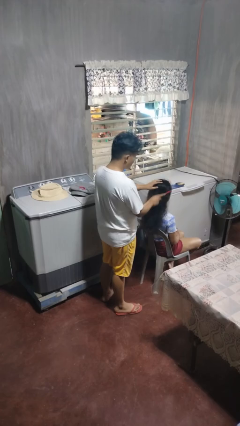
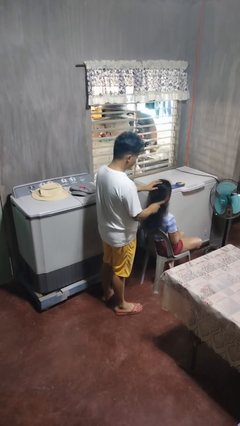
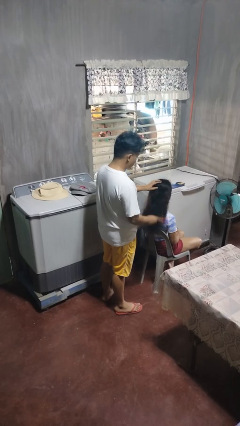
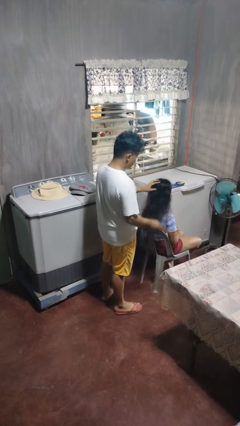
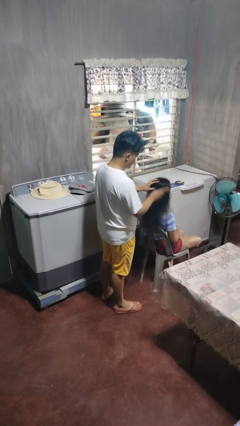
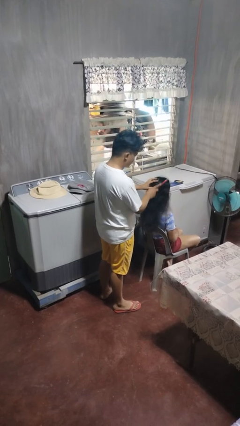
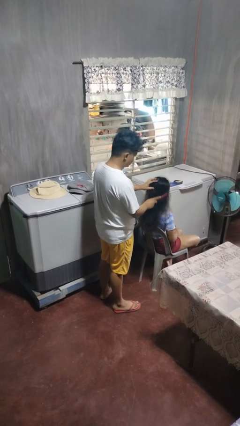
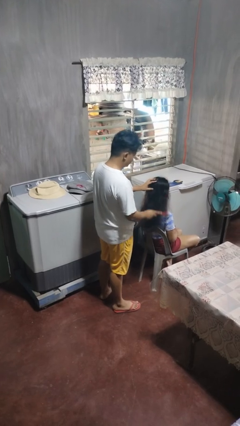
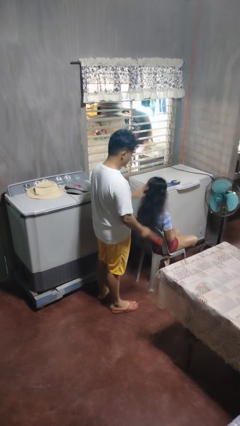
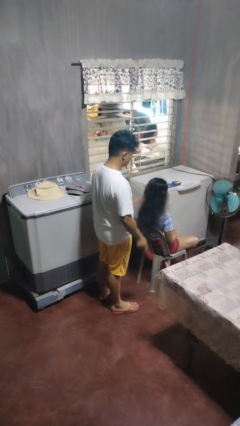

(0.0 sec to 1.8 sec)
person brushes hair of person

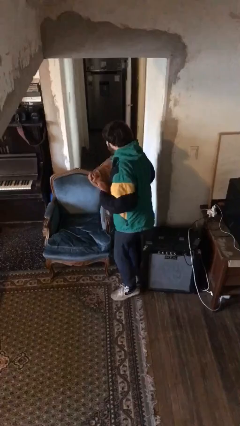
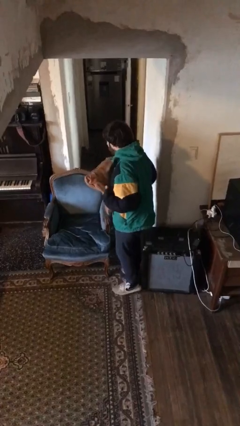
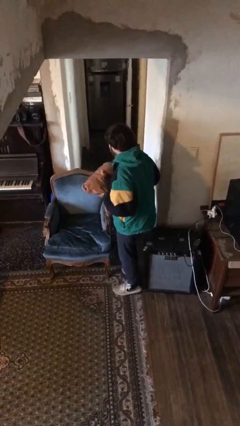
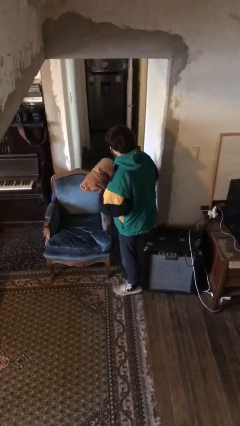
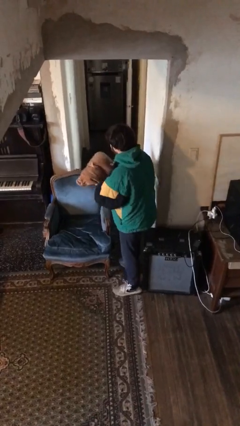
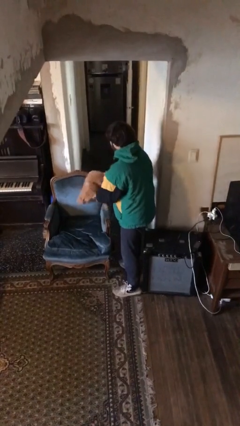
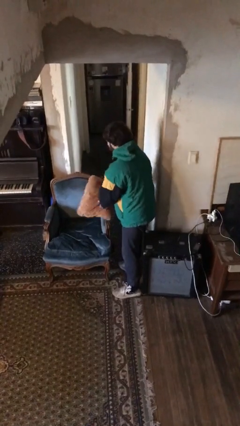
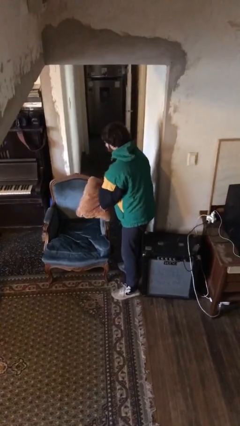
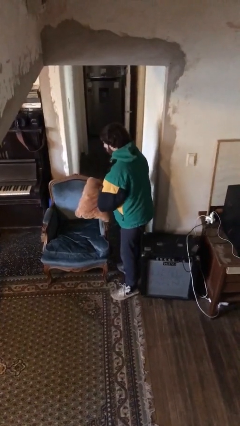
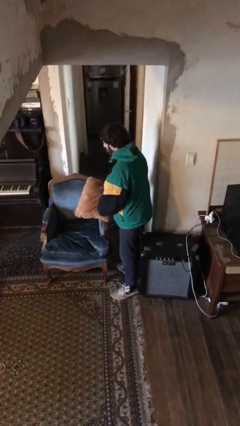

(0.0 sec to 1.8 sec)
person puts down object on couch

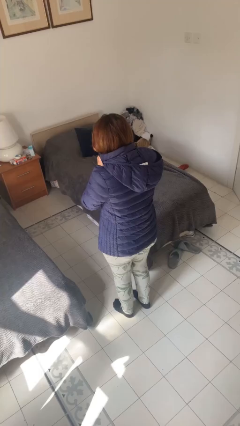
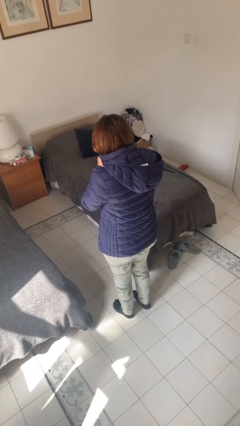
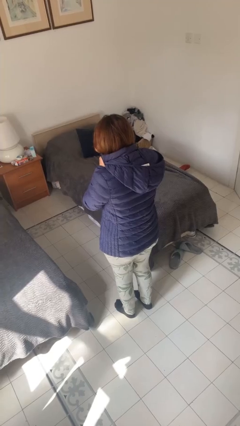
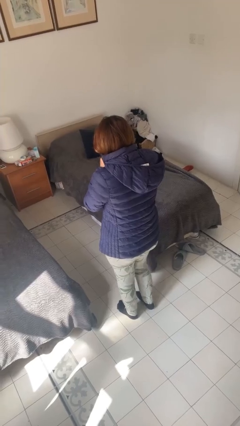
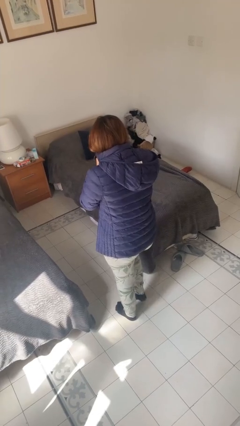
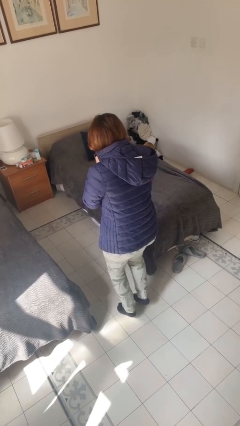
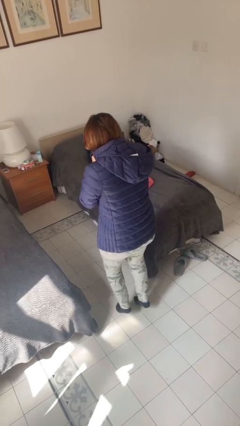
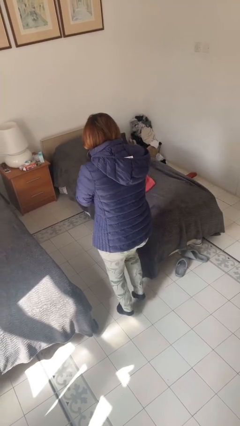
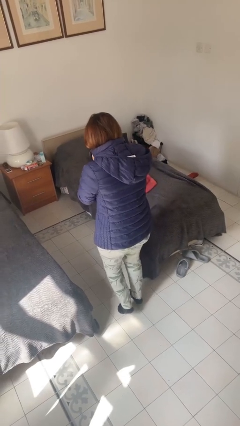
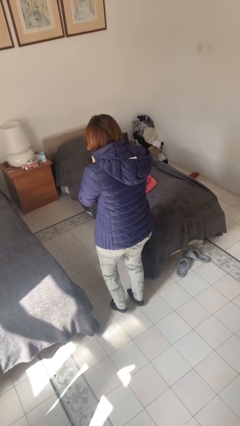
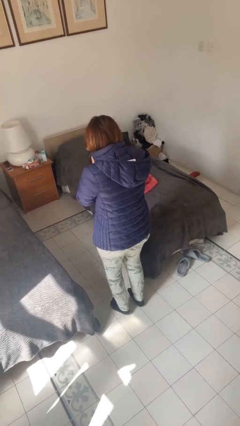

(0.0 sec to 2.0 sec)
person walks tiptoe

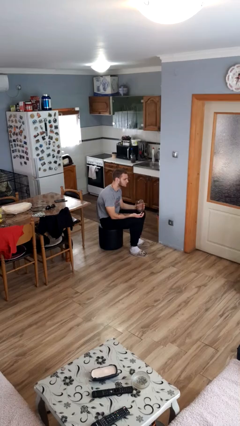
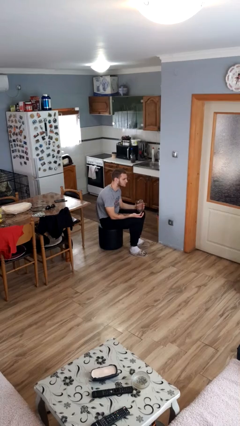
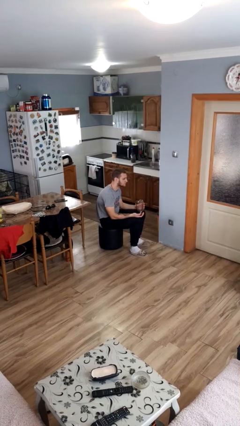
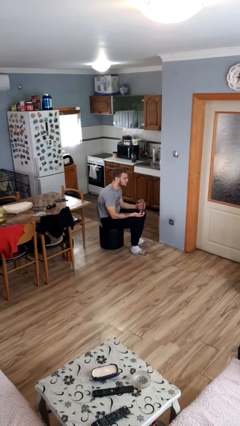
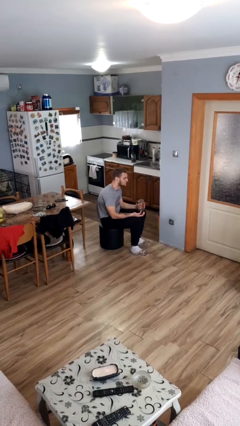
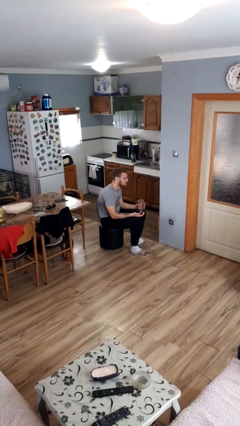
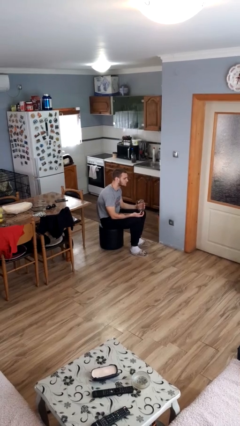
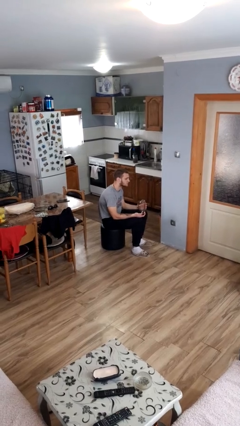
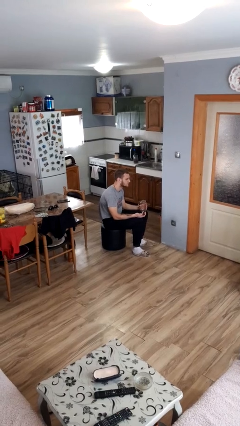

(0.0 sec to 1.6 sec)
person opens jar

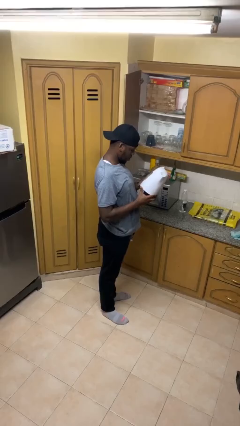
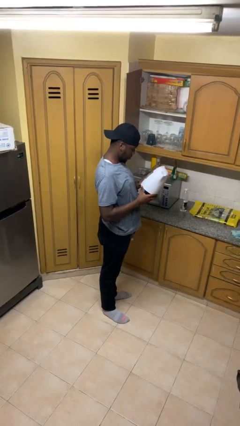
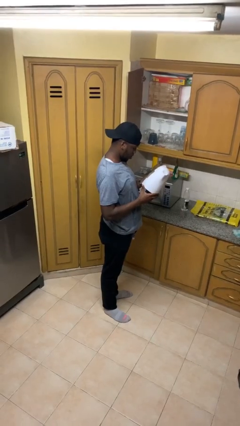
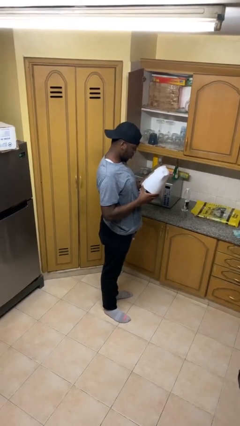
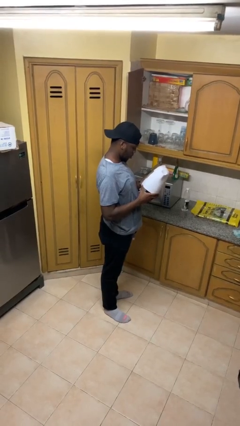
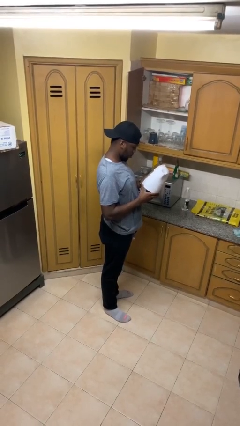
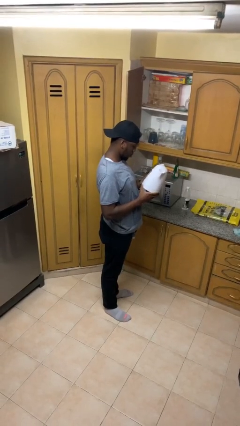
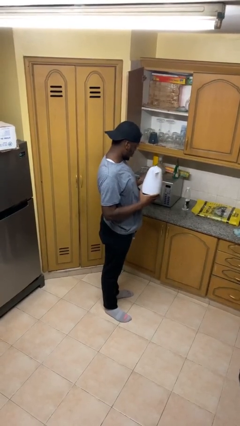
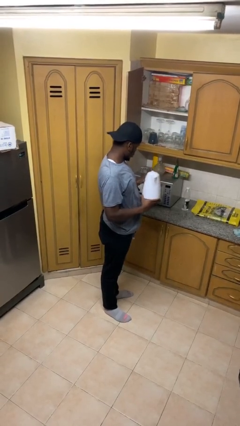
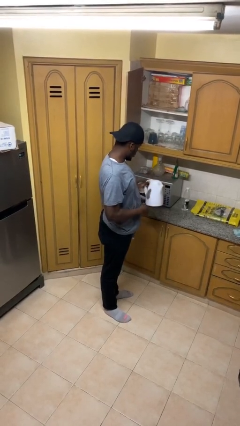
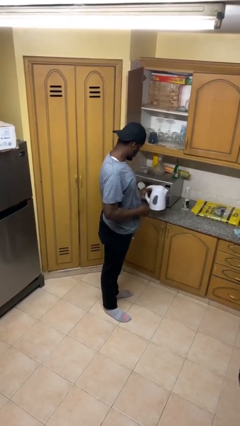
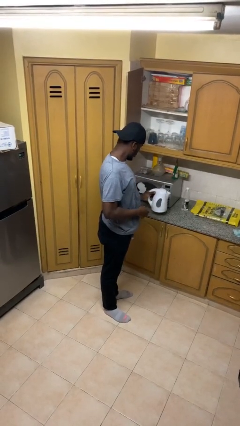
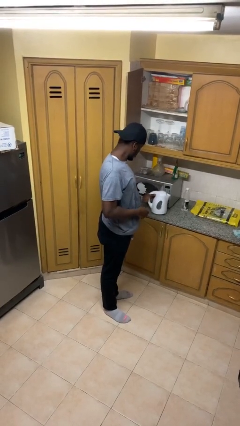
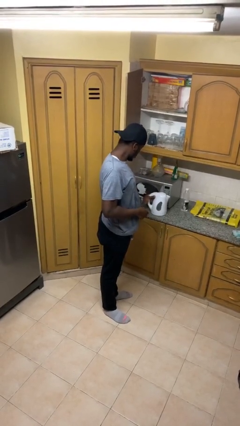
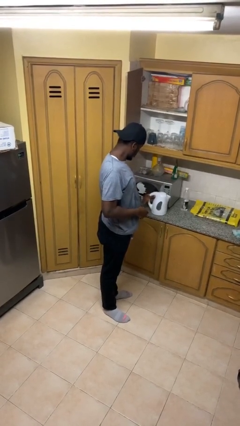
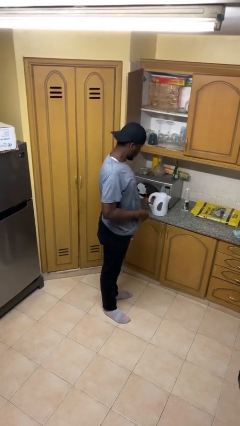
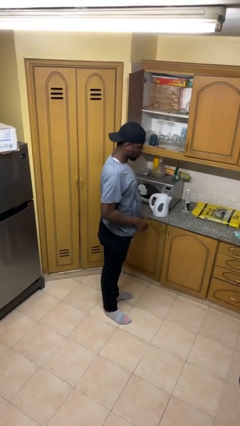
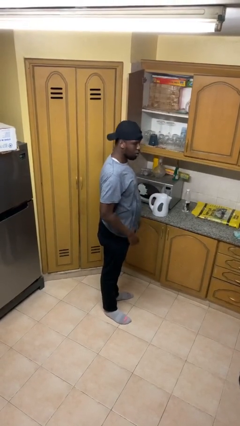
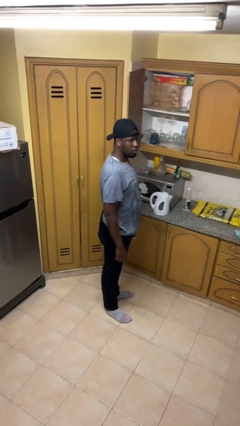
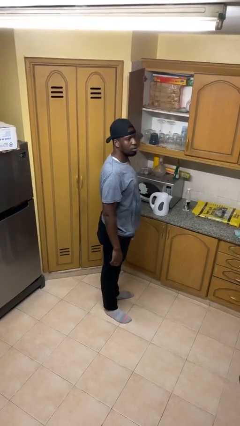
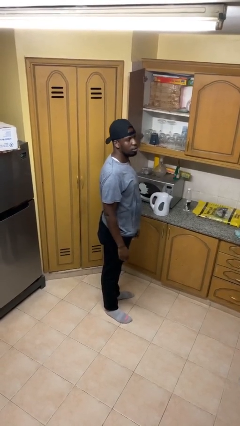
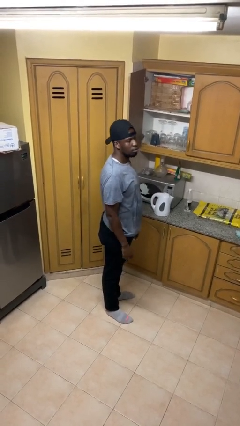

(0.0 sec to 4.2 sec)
person puts down object on table

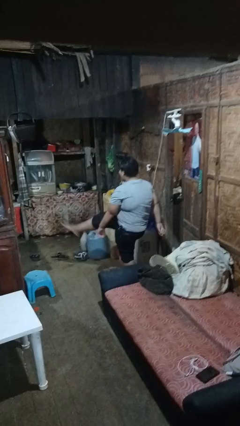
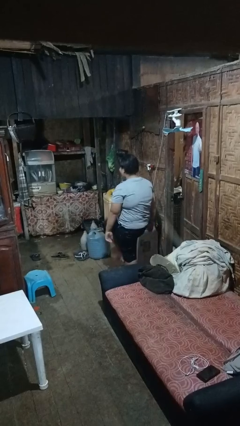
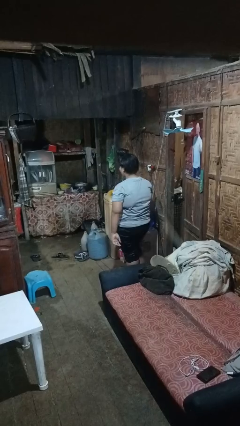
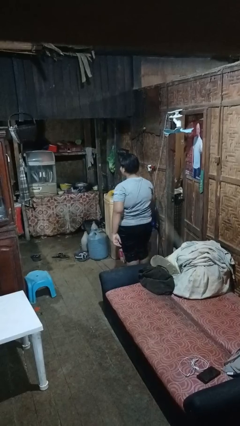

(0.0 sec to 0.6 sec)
person karate kicks

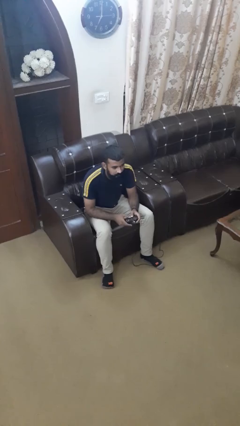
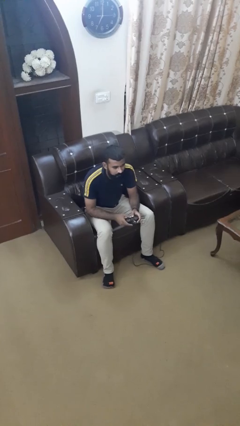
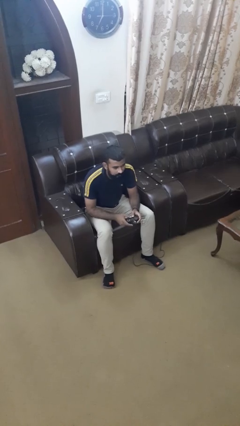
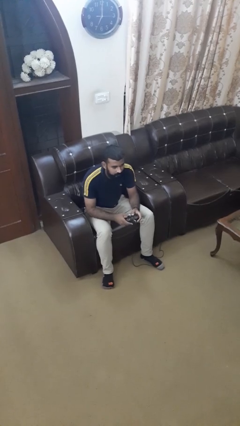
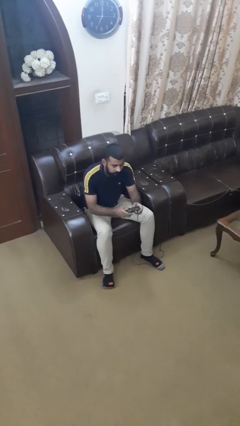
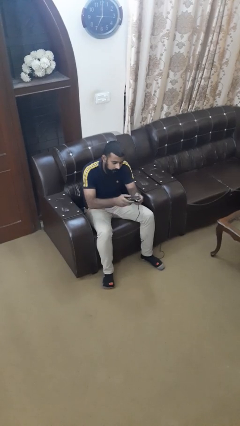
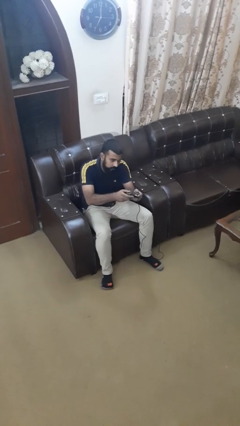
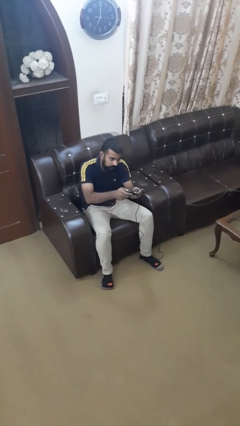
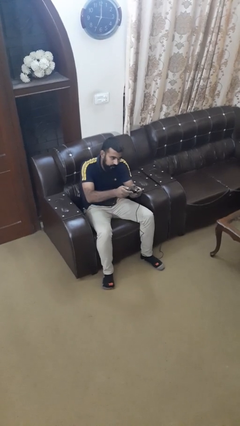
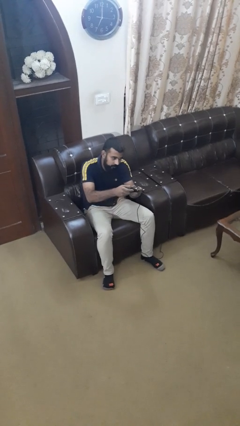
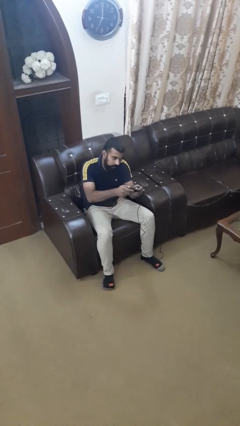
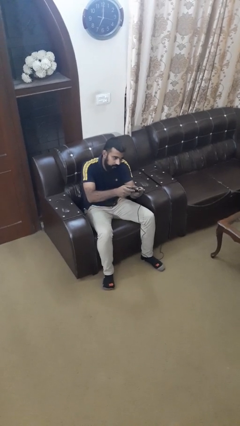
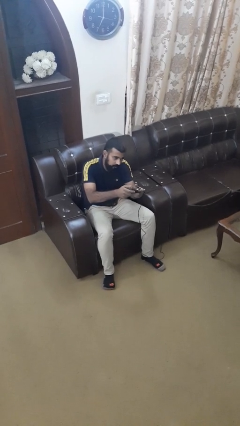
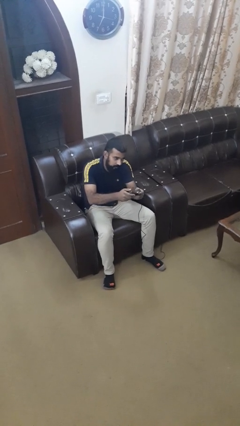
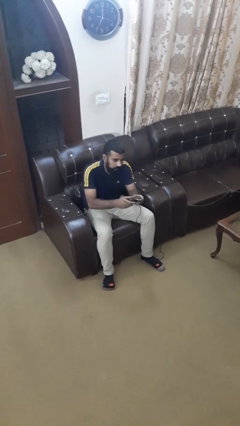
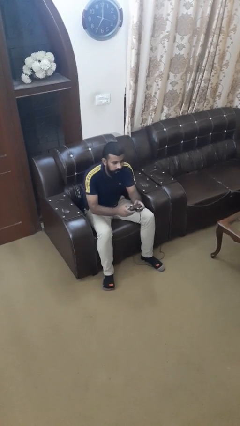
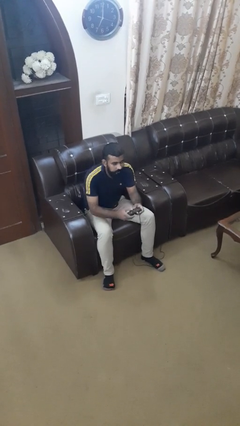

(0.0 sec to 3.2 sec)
person interacts with handheld game

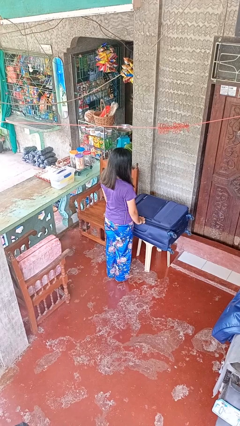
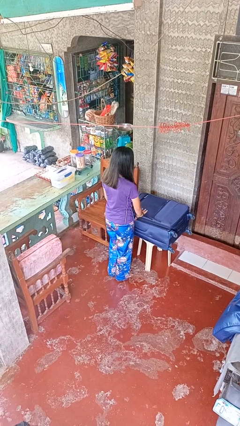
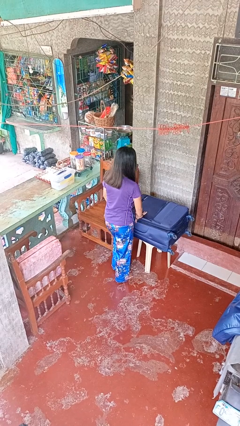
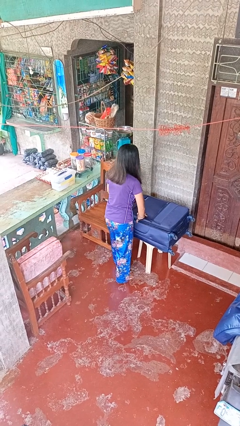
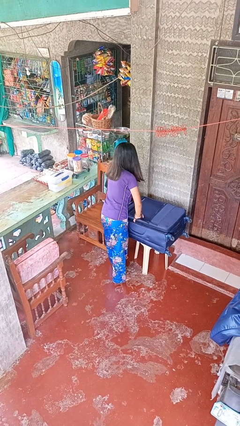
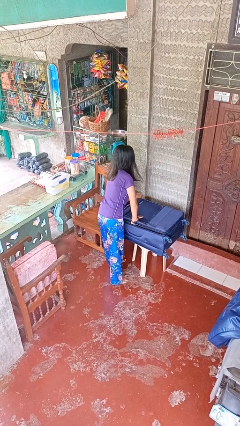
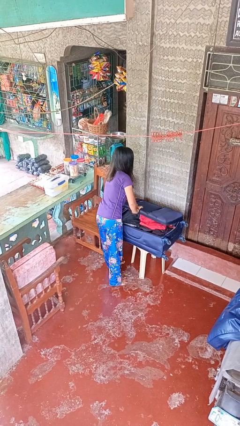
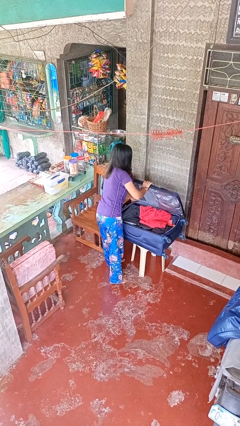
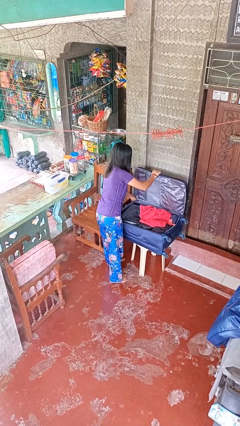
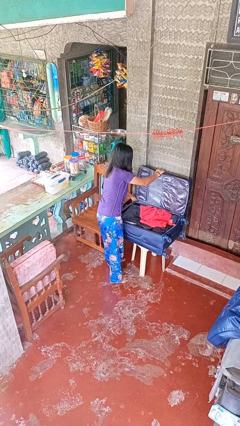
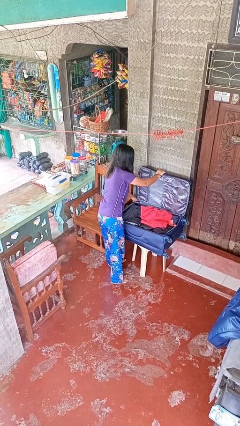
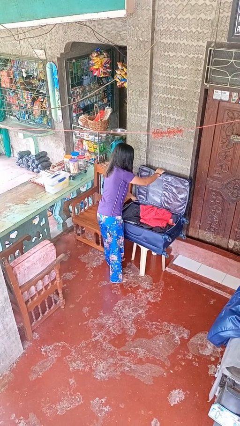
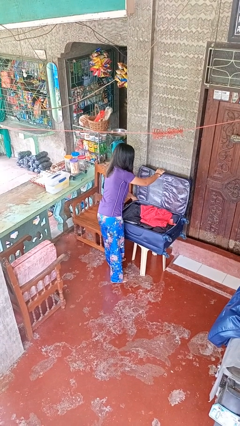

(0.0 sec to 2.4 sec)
person opens suitcase
